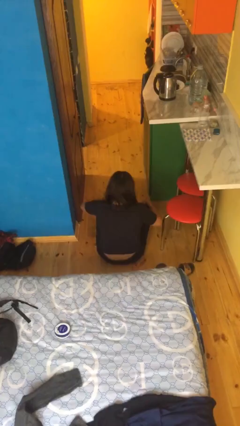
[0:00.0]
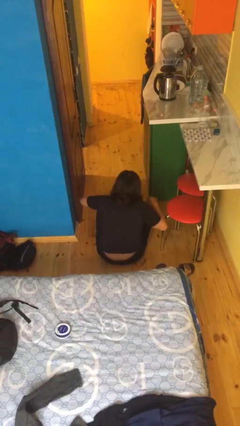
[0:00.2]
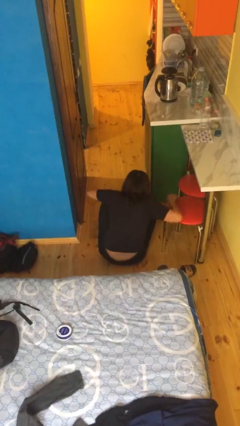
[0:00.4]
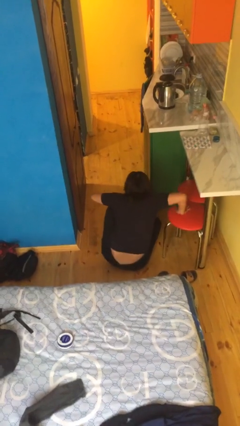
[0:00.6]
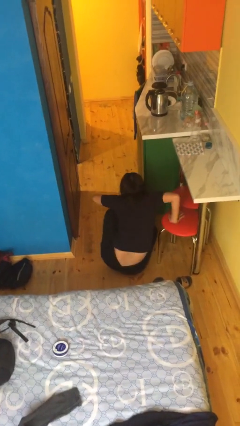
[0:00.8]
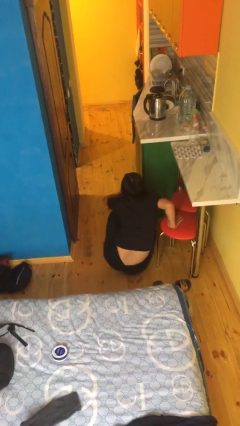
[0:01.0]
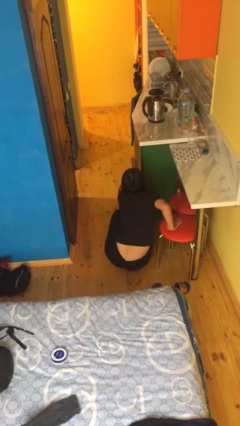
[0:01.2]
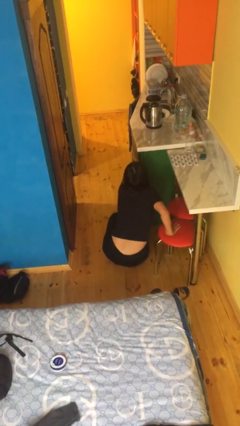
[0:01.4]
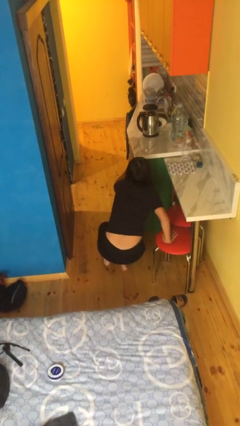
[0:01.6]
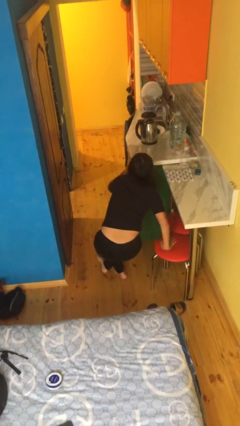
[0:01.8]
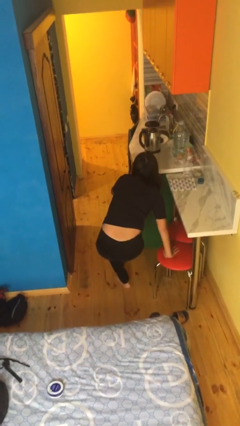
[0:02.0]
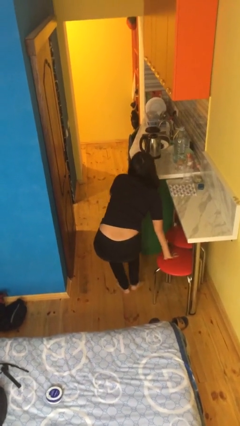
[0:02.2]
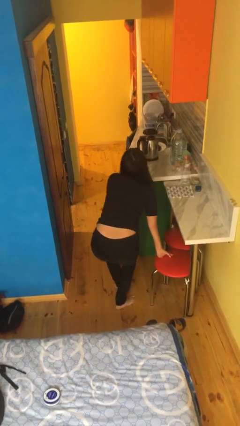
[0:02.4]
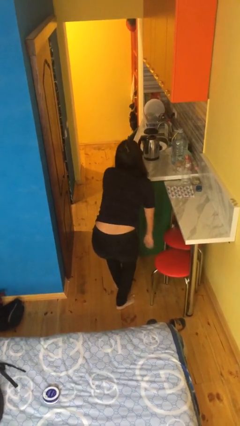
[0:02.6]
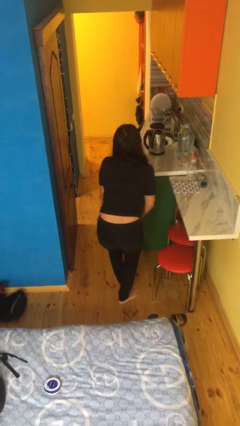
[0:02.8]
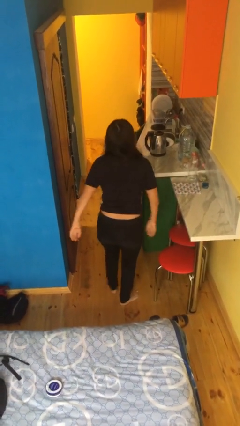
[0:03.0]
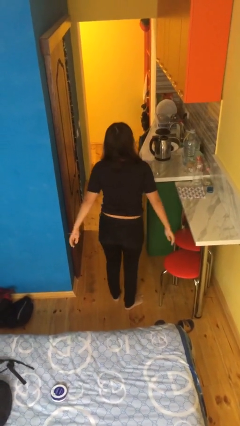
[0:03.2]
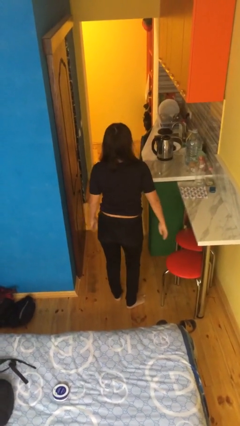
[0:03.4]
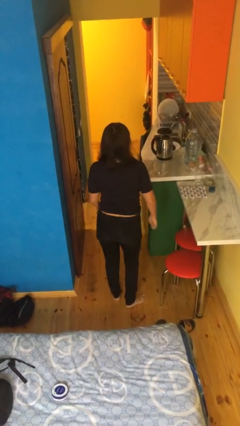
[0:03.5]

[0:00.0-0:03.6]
person stands up from floor

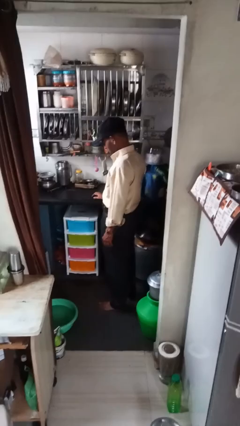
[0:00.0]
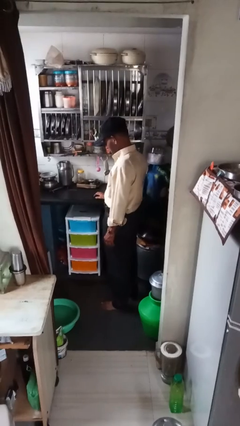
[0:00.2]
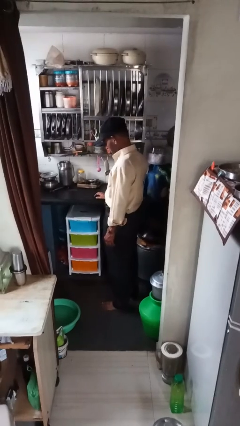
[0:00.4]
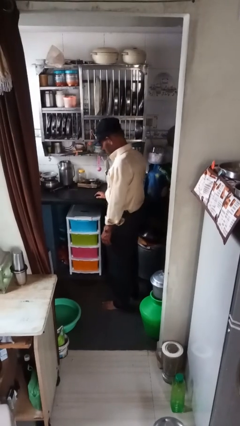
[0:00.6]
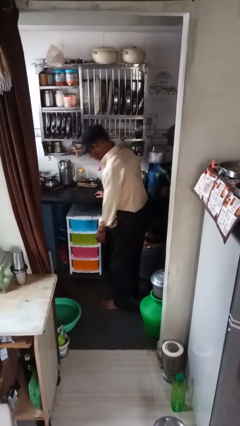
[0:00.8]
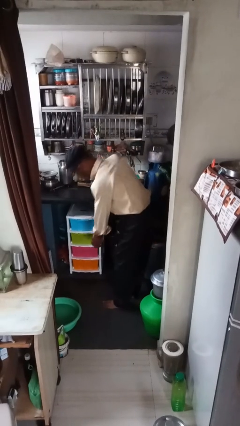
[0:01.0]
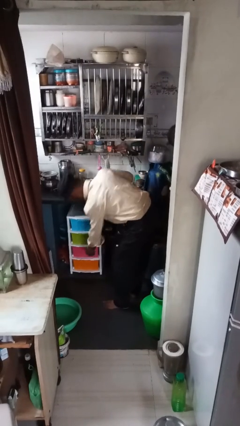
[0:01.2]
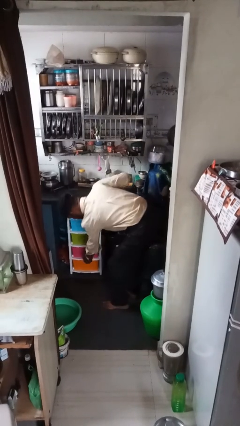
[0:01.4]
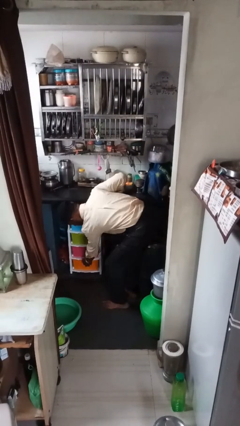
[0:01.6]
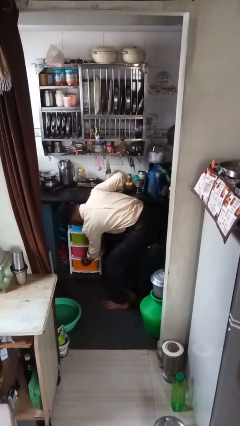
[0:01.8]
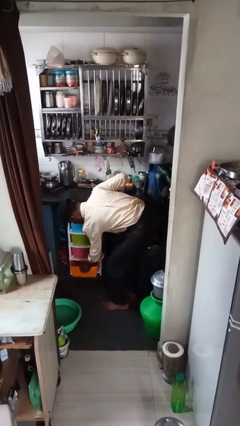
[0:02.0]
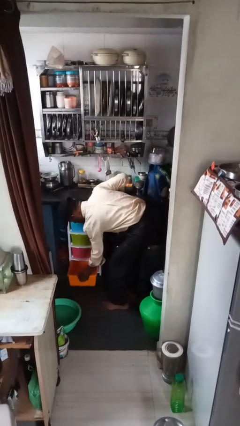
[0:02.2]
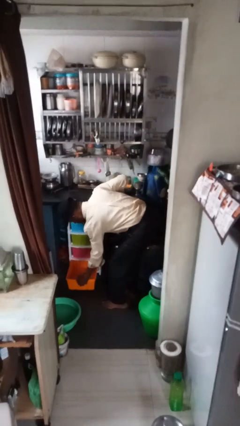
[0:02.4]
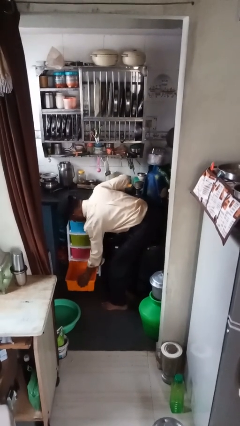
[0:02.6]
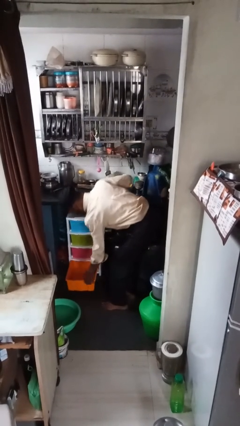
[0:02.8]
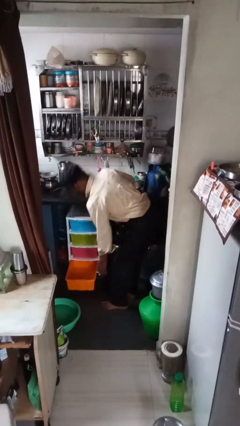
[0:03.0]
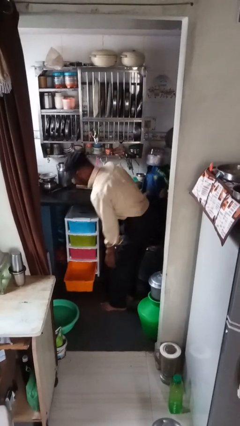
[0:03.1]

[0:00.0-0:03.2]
person opens kitchen drawer

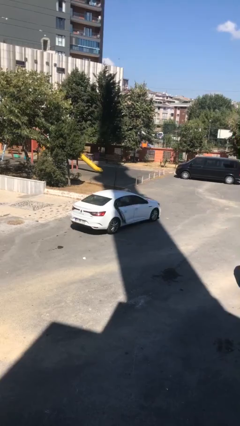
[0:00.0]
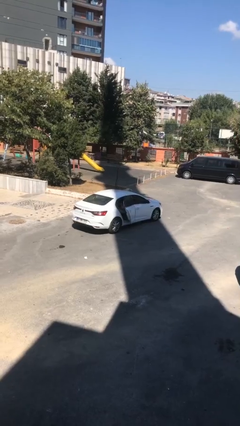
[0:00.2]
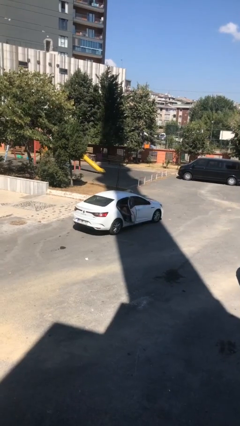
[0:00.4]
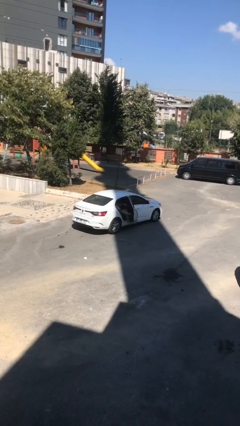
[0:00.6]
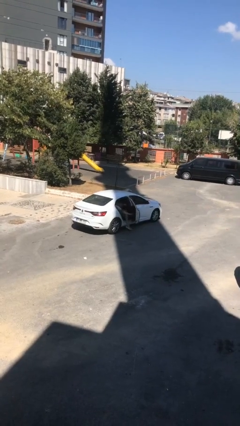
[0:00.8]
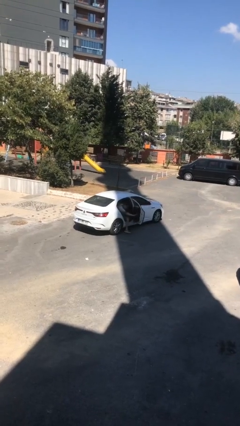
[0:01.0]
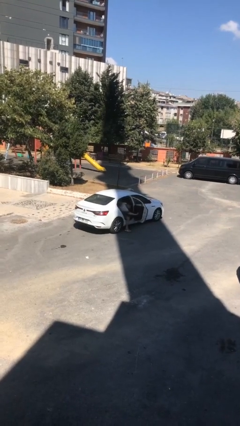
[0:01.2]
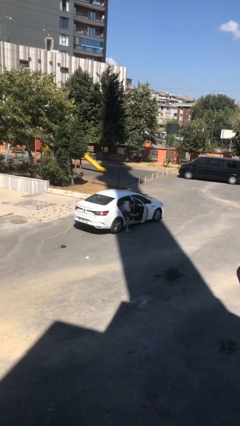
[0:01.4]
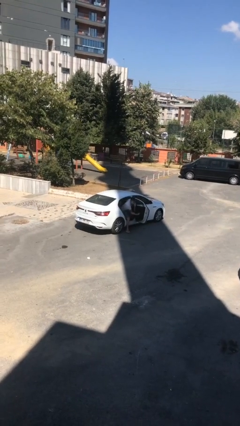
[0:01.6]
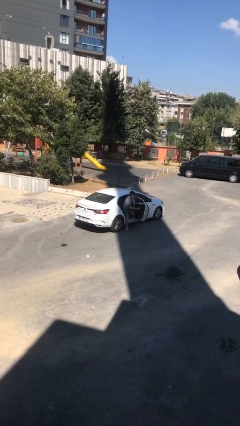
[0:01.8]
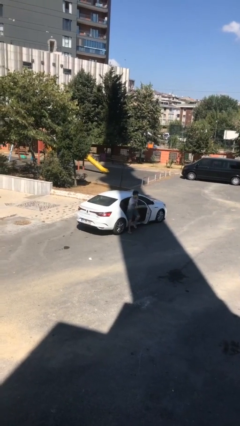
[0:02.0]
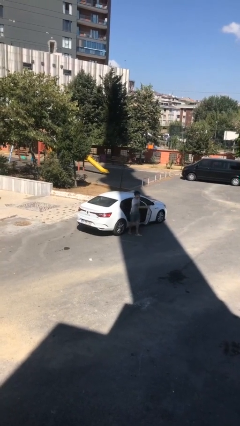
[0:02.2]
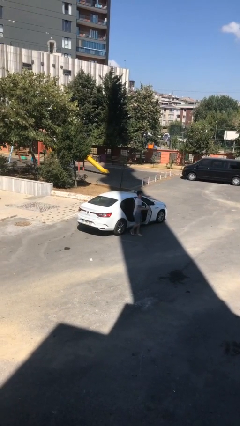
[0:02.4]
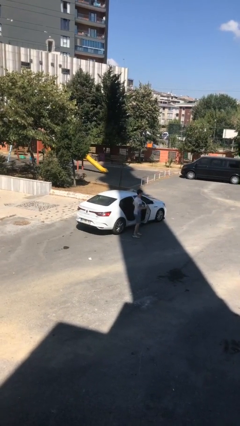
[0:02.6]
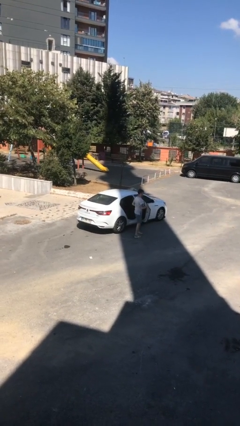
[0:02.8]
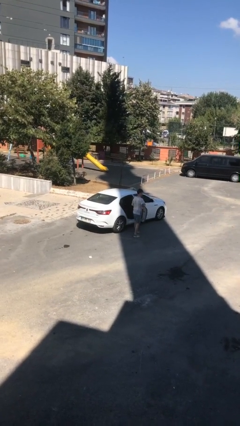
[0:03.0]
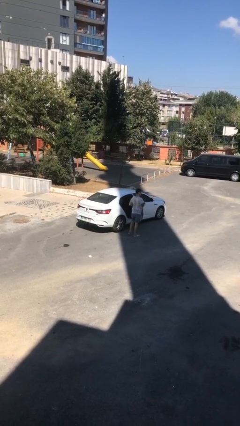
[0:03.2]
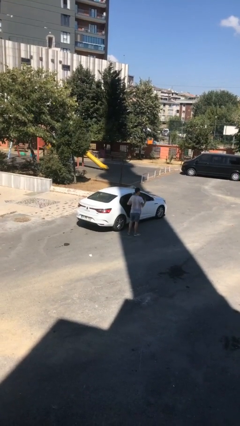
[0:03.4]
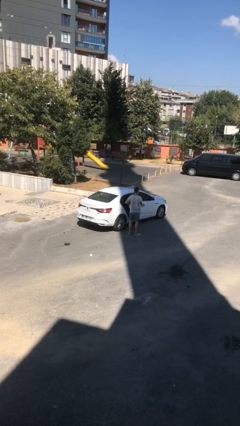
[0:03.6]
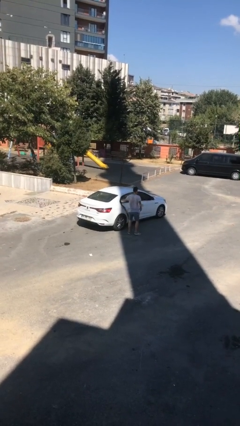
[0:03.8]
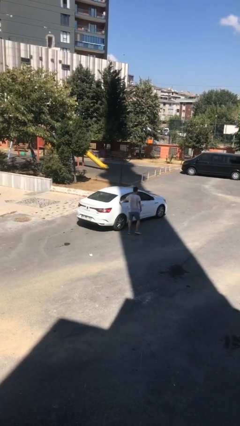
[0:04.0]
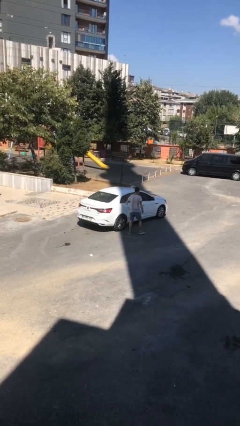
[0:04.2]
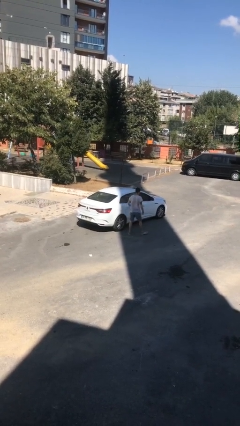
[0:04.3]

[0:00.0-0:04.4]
car drops off person

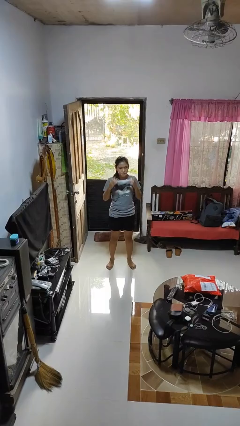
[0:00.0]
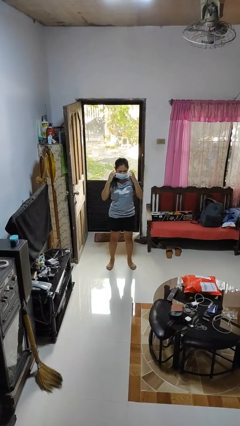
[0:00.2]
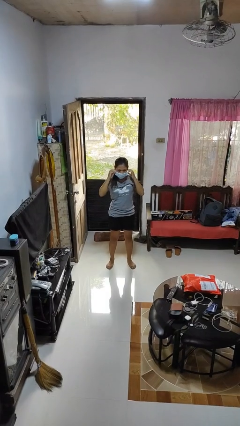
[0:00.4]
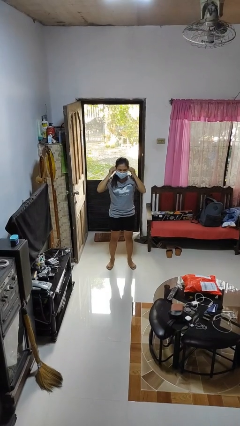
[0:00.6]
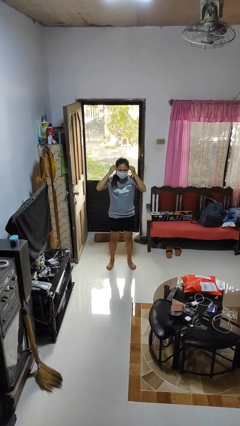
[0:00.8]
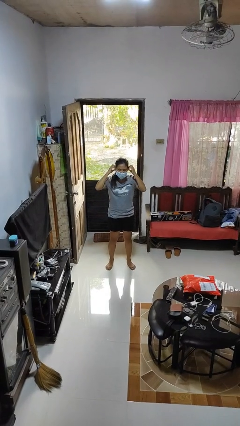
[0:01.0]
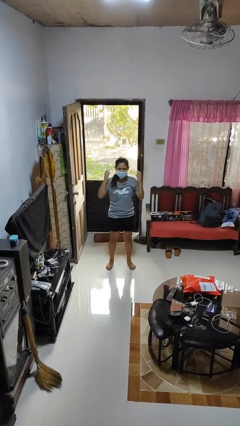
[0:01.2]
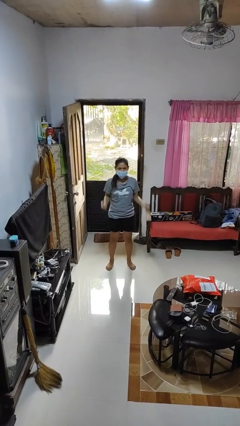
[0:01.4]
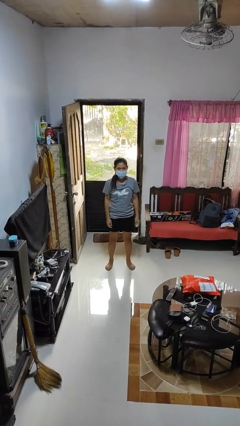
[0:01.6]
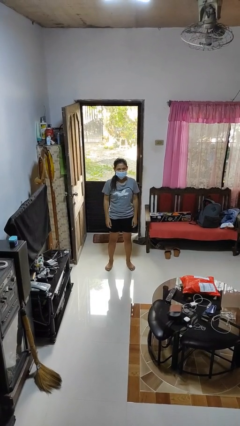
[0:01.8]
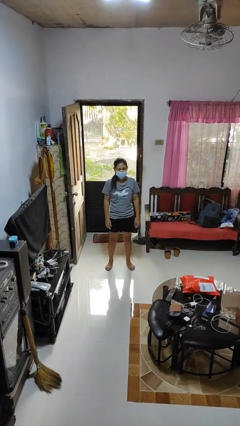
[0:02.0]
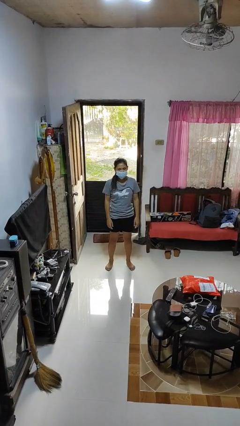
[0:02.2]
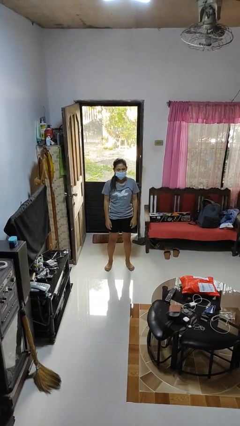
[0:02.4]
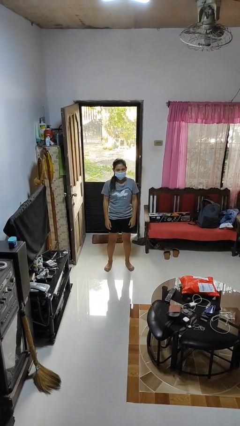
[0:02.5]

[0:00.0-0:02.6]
person puts on facemask

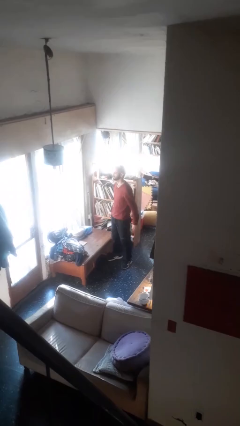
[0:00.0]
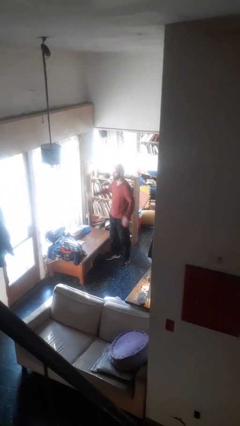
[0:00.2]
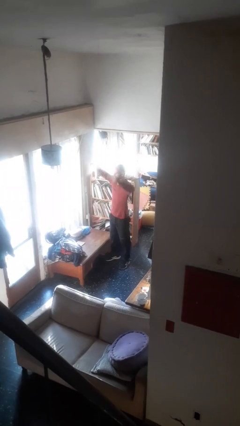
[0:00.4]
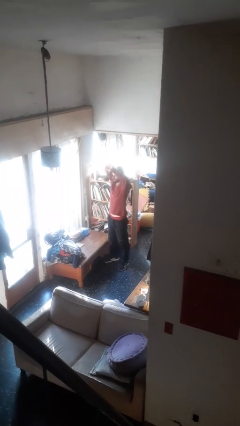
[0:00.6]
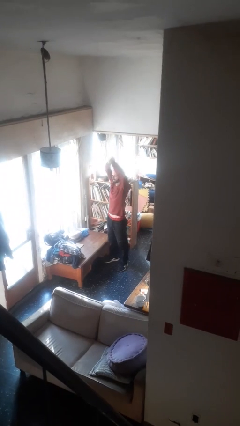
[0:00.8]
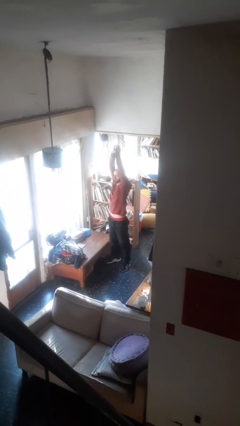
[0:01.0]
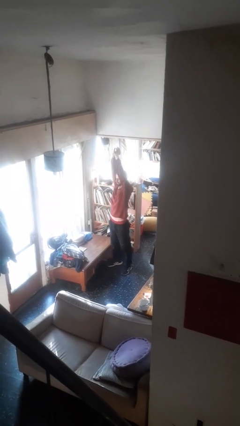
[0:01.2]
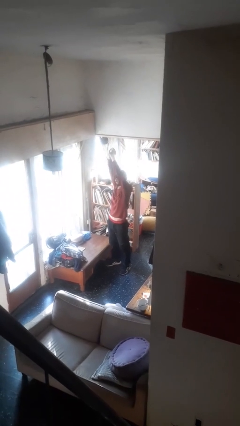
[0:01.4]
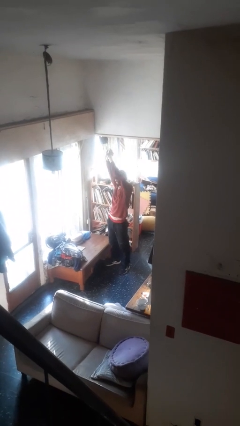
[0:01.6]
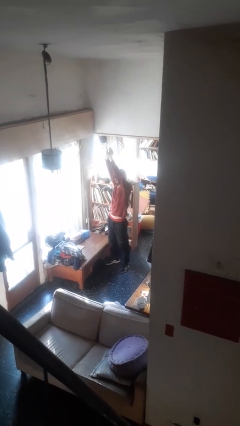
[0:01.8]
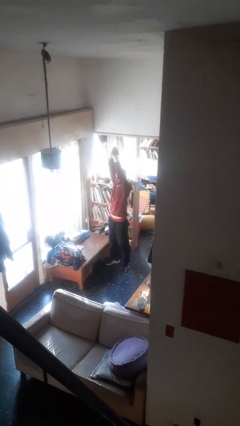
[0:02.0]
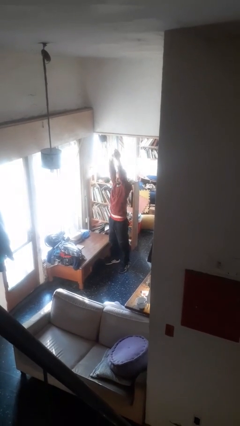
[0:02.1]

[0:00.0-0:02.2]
person stretches arms over head

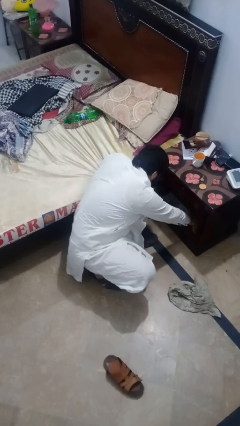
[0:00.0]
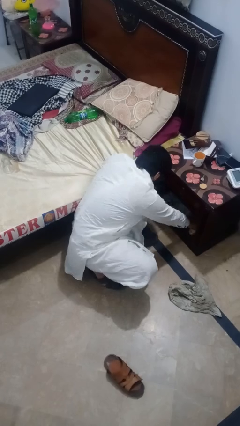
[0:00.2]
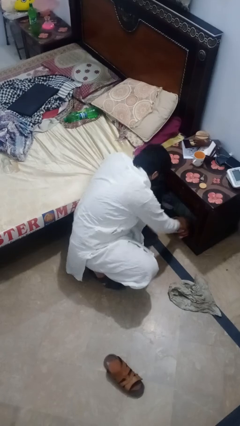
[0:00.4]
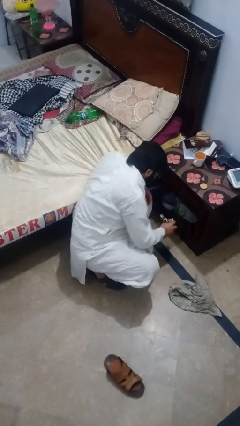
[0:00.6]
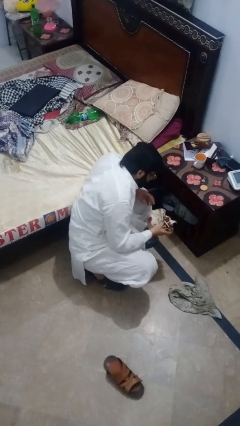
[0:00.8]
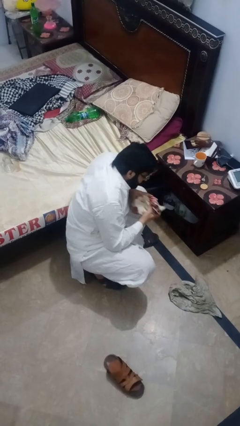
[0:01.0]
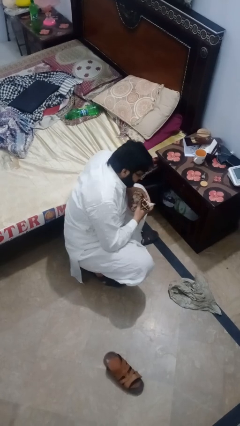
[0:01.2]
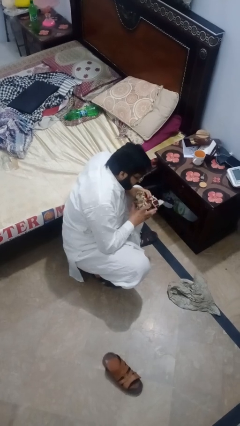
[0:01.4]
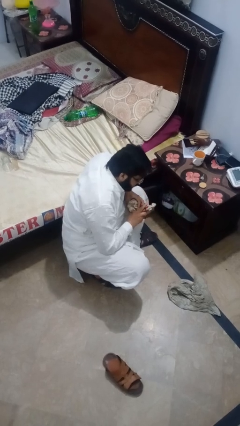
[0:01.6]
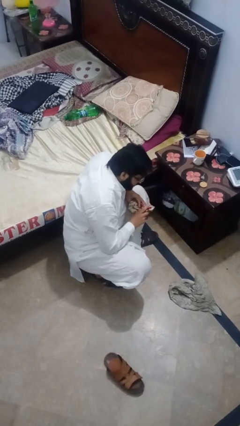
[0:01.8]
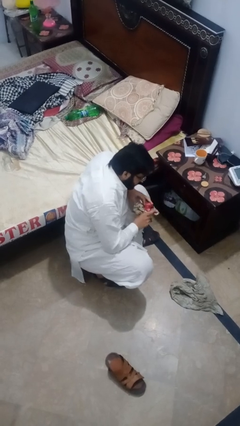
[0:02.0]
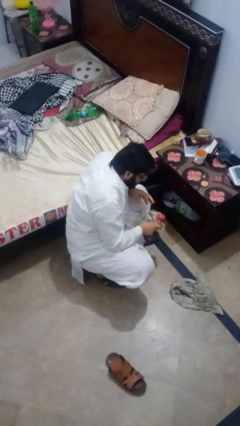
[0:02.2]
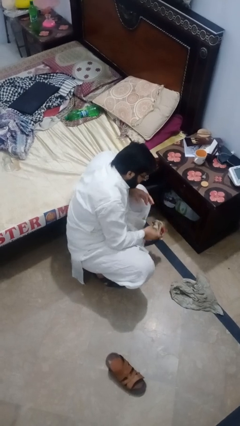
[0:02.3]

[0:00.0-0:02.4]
person picks up object from cabinet
